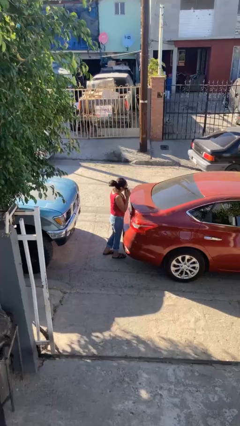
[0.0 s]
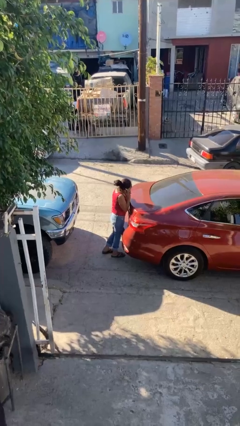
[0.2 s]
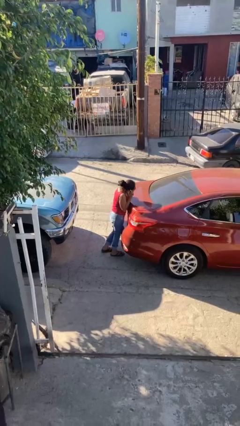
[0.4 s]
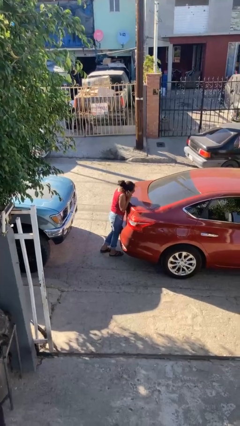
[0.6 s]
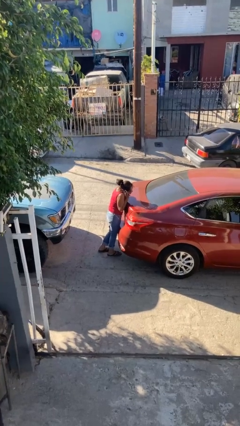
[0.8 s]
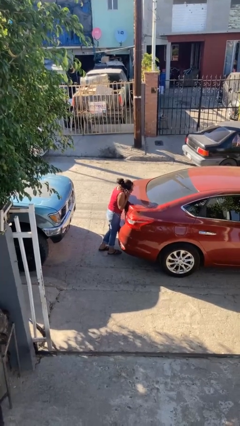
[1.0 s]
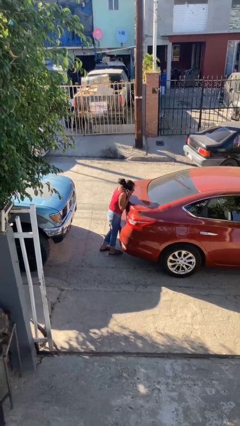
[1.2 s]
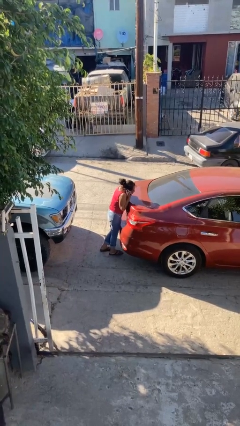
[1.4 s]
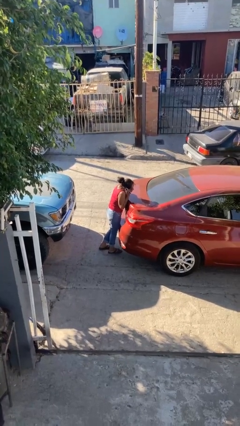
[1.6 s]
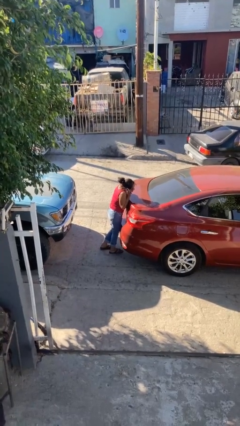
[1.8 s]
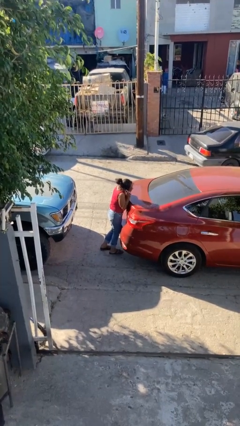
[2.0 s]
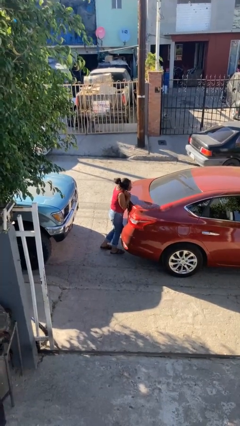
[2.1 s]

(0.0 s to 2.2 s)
person leans against car

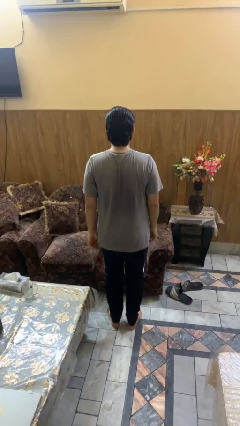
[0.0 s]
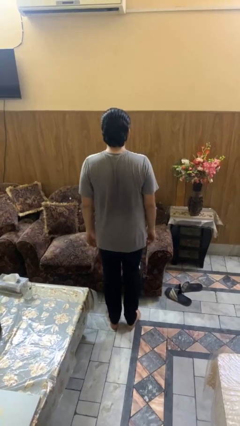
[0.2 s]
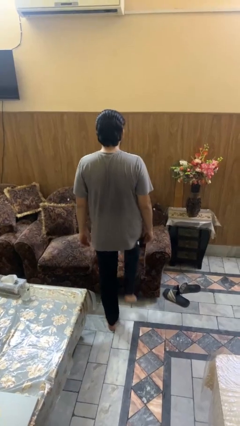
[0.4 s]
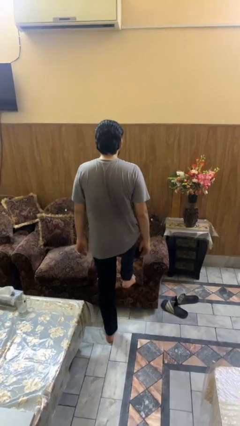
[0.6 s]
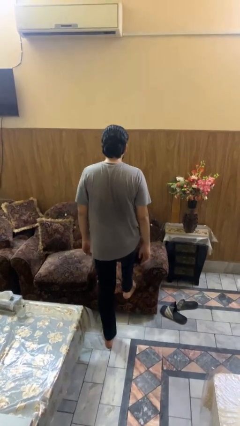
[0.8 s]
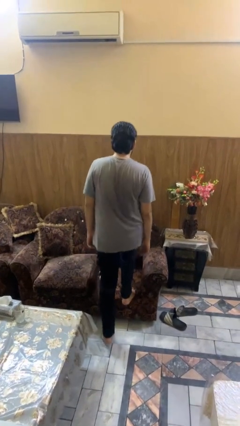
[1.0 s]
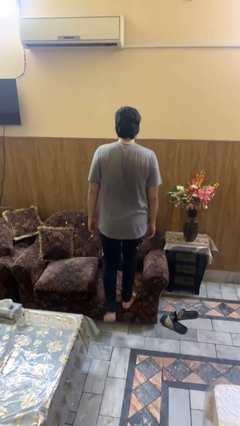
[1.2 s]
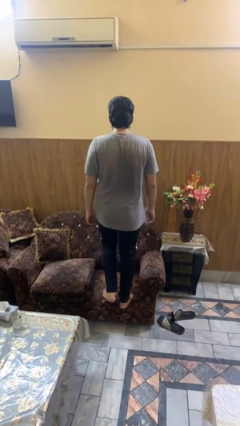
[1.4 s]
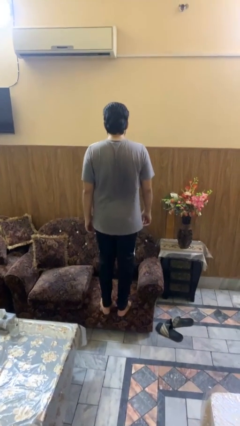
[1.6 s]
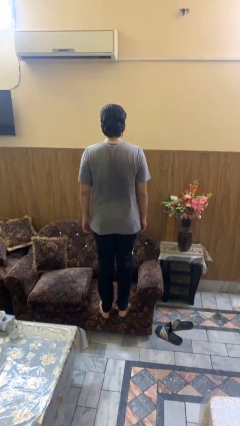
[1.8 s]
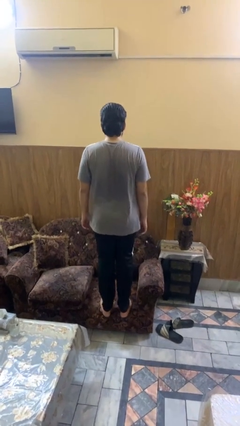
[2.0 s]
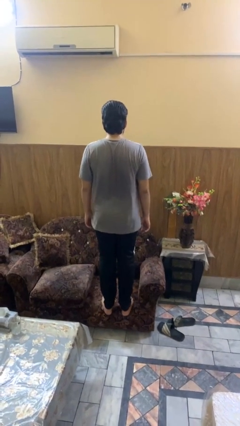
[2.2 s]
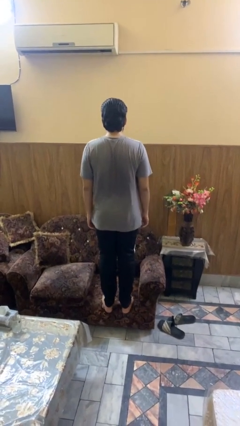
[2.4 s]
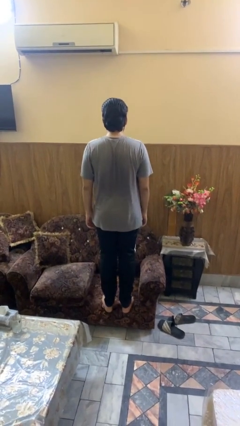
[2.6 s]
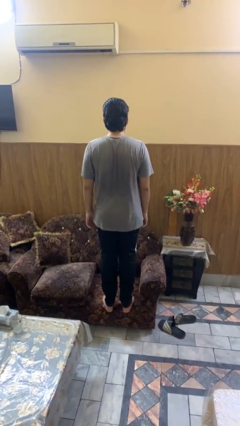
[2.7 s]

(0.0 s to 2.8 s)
person climbs on couch

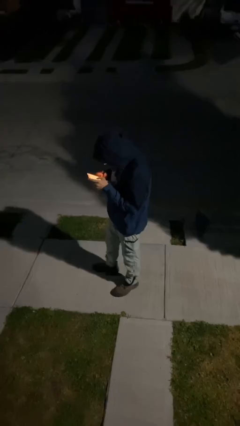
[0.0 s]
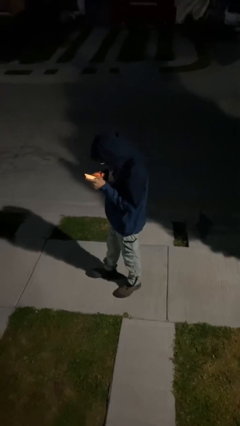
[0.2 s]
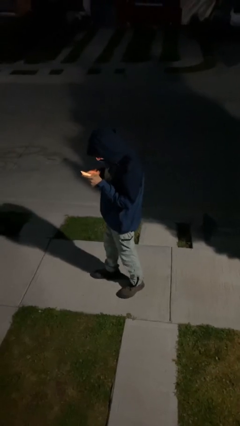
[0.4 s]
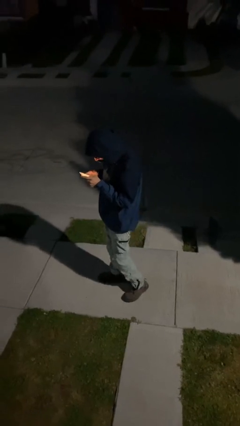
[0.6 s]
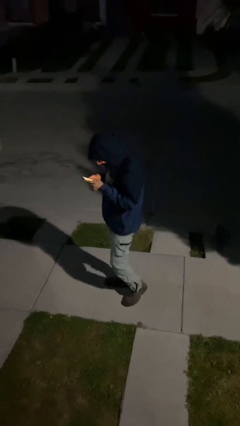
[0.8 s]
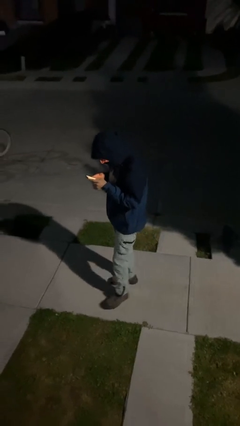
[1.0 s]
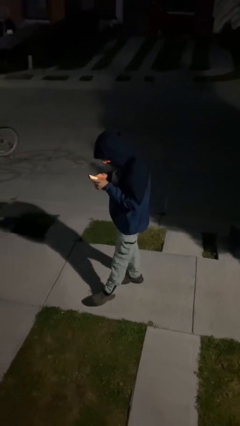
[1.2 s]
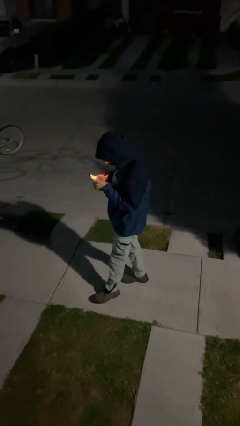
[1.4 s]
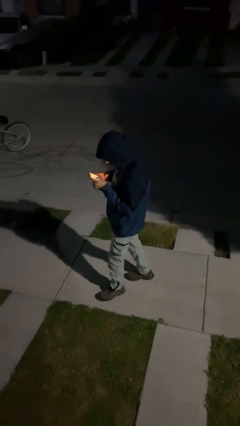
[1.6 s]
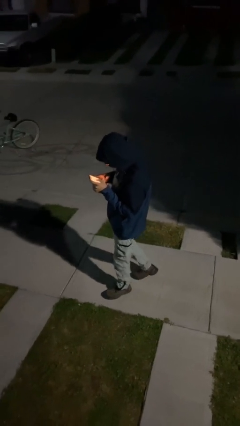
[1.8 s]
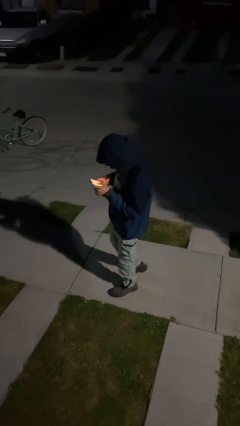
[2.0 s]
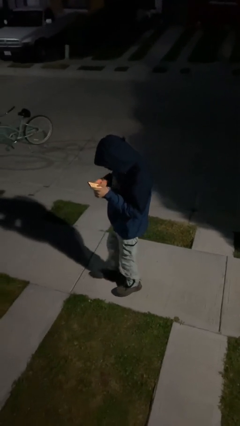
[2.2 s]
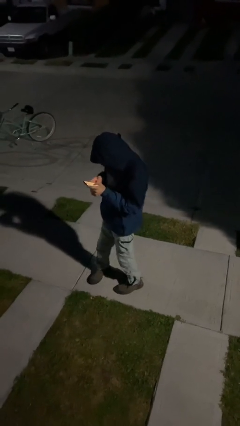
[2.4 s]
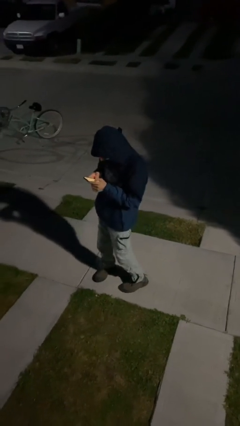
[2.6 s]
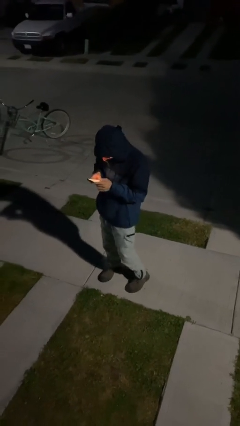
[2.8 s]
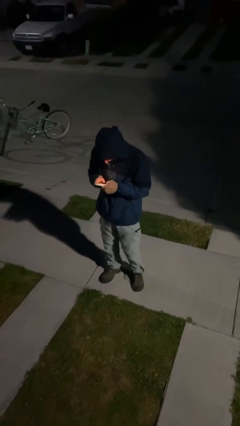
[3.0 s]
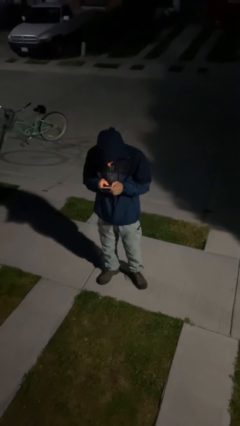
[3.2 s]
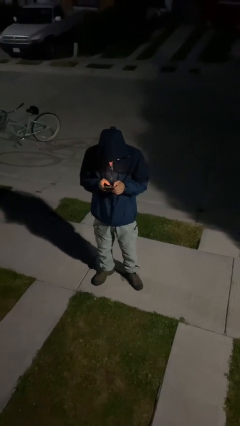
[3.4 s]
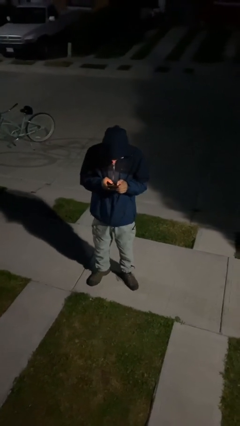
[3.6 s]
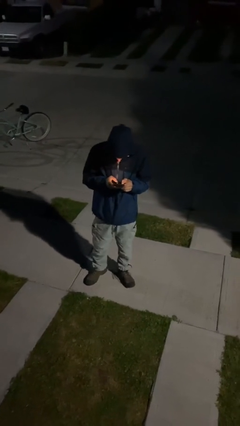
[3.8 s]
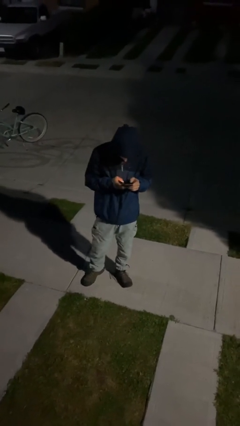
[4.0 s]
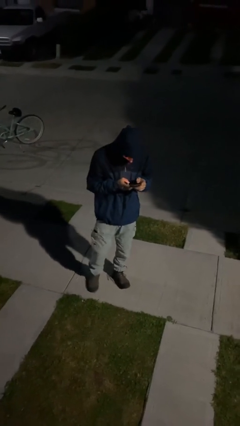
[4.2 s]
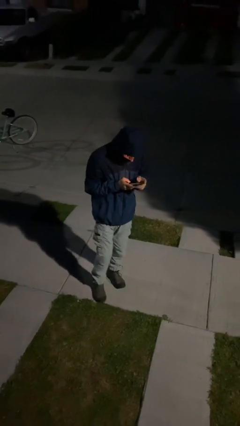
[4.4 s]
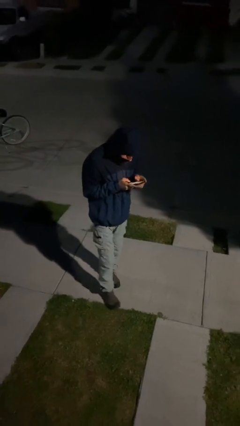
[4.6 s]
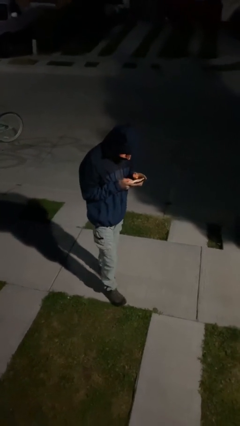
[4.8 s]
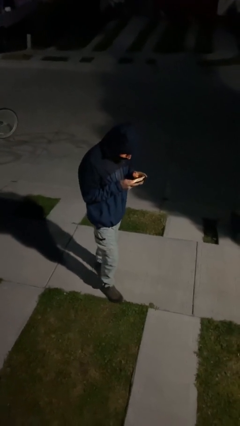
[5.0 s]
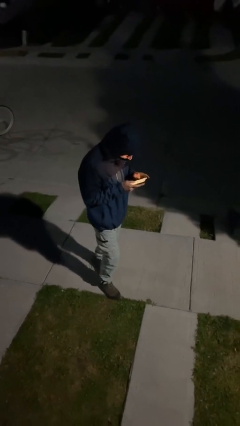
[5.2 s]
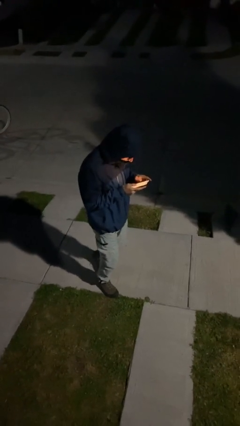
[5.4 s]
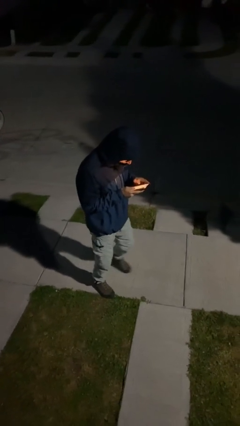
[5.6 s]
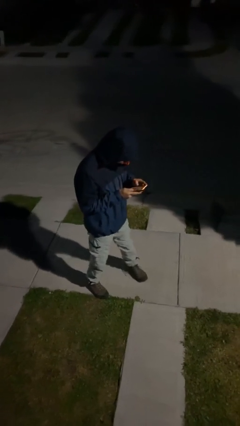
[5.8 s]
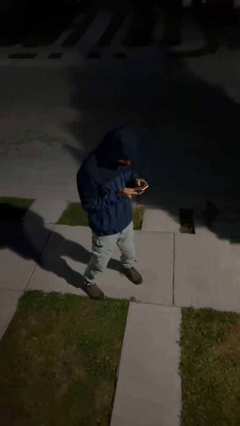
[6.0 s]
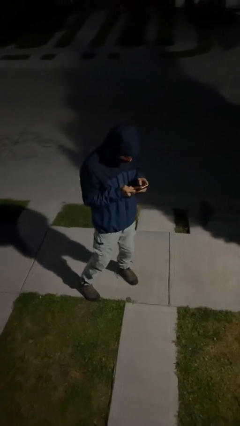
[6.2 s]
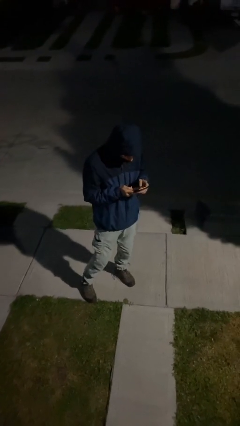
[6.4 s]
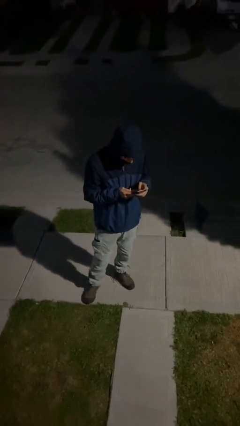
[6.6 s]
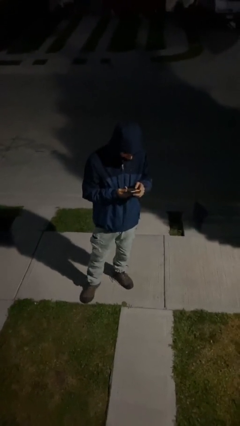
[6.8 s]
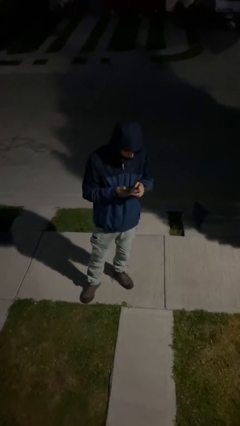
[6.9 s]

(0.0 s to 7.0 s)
person texts on phone

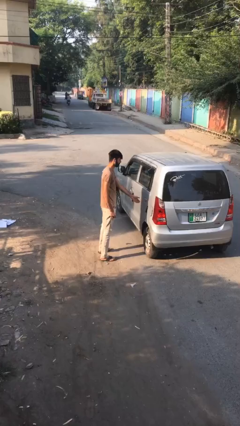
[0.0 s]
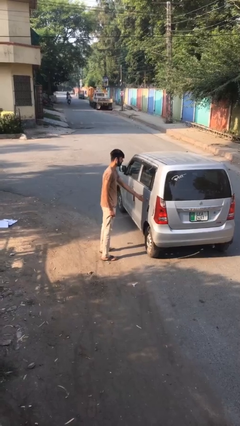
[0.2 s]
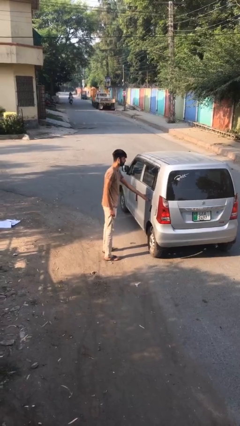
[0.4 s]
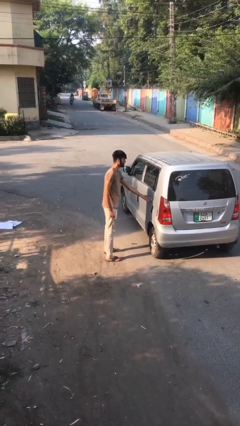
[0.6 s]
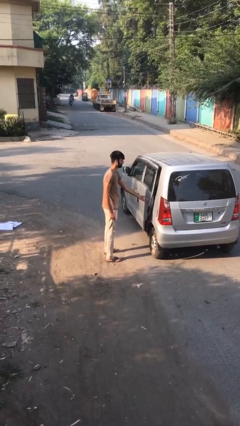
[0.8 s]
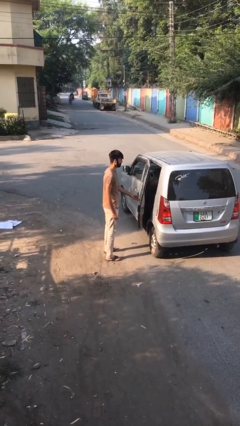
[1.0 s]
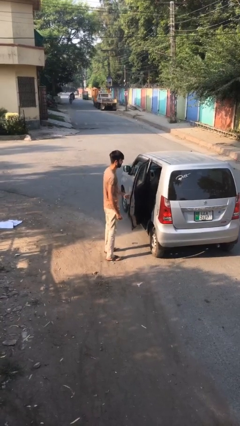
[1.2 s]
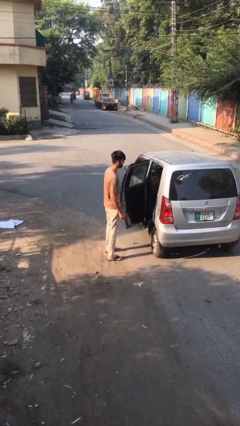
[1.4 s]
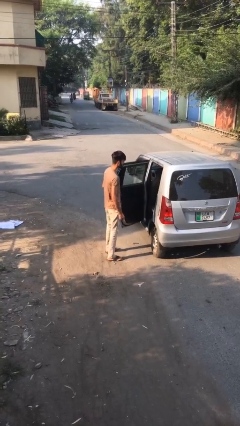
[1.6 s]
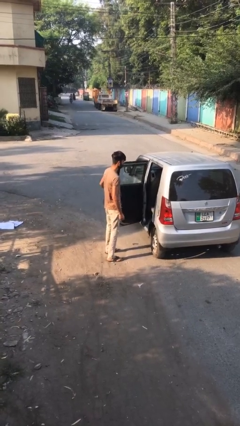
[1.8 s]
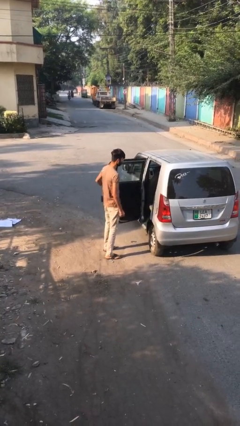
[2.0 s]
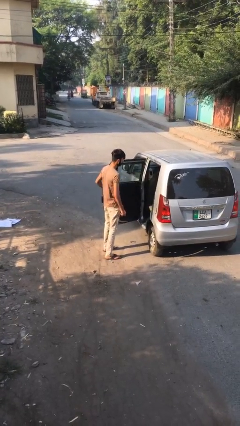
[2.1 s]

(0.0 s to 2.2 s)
person opens car door

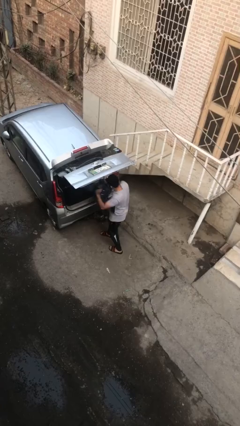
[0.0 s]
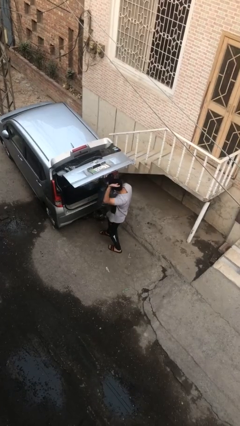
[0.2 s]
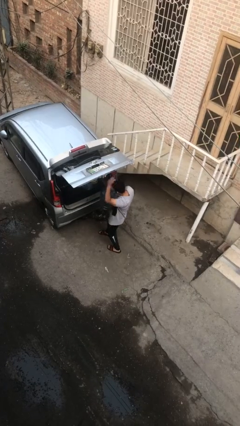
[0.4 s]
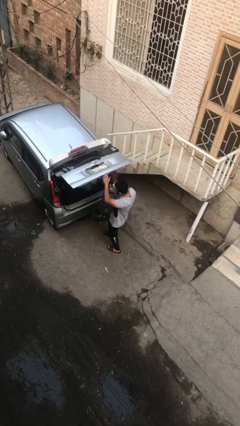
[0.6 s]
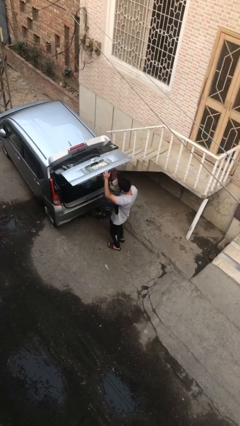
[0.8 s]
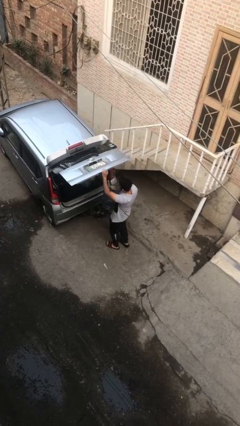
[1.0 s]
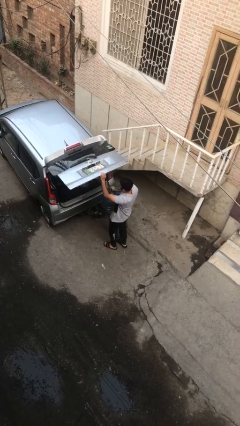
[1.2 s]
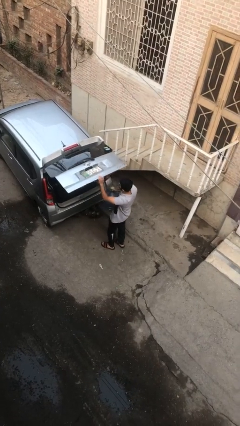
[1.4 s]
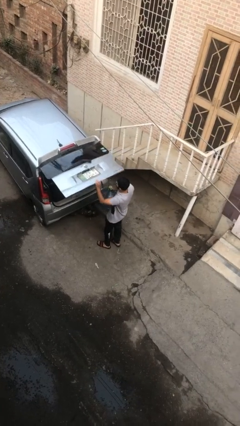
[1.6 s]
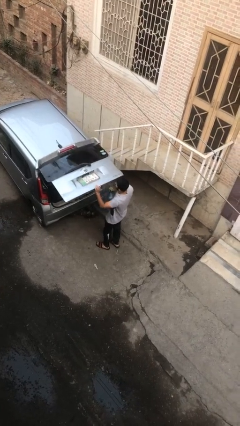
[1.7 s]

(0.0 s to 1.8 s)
person unloads car

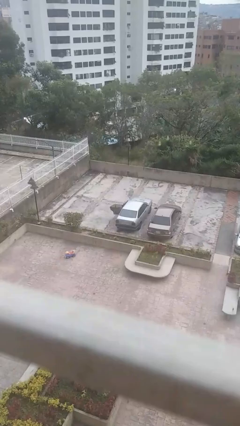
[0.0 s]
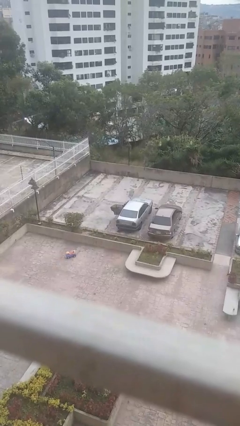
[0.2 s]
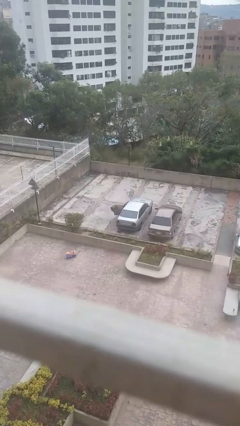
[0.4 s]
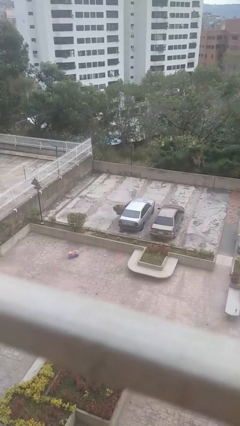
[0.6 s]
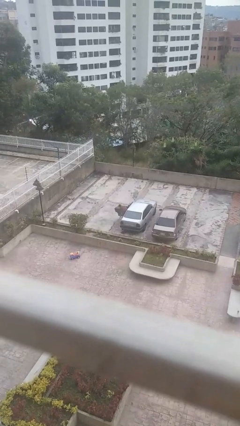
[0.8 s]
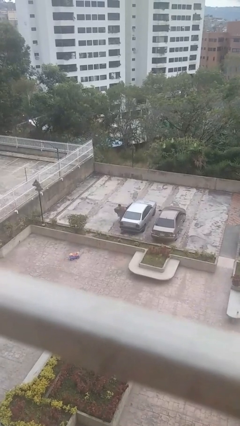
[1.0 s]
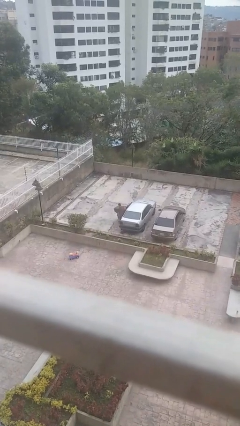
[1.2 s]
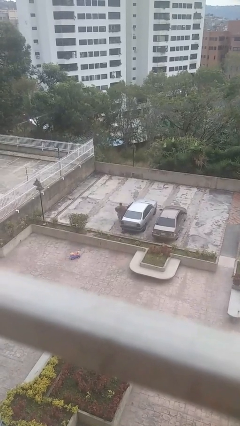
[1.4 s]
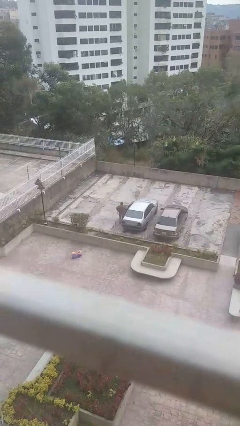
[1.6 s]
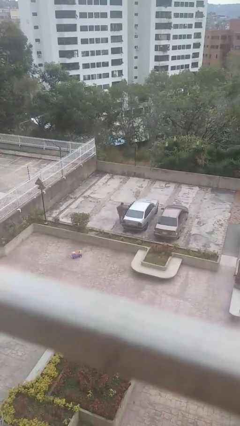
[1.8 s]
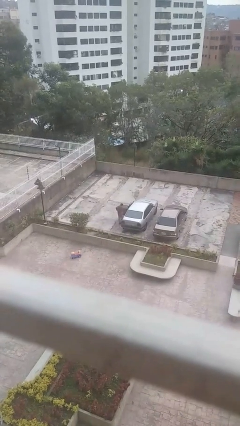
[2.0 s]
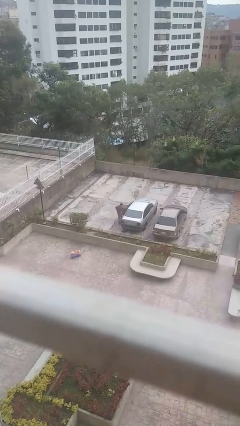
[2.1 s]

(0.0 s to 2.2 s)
person exits car
